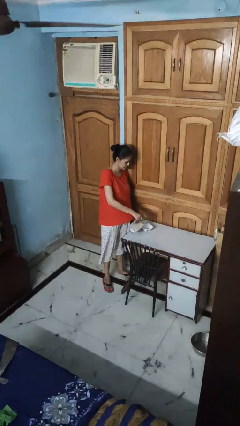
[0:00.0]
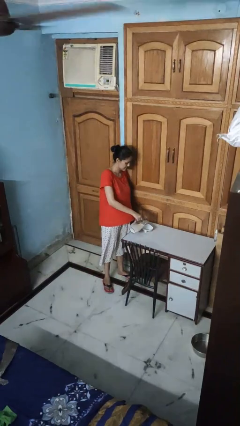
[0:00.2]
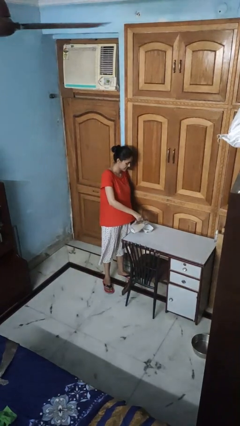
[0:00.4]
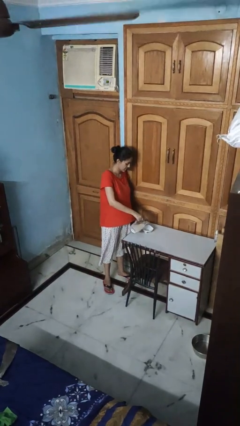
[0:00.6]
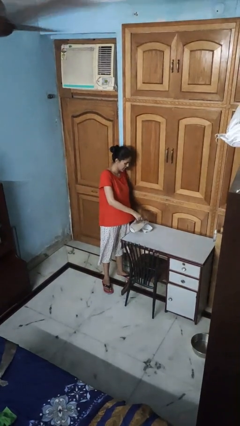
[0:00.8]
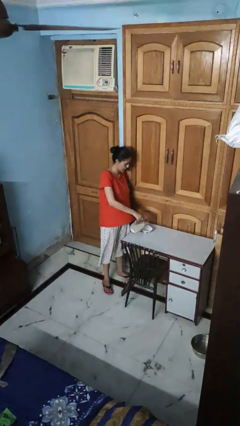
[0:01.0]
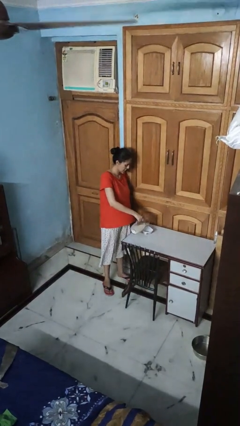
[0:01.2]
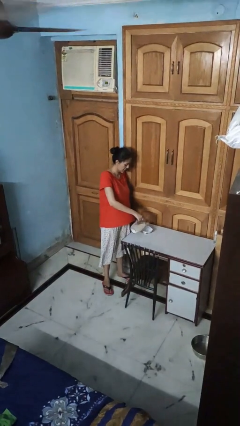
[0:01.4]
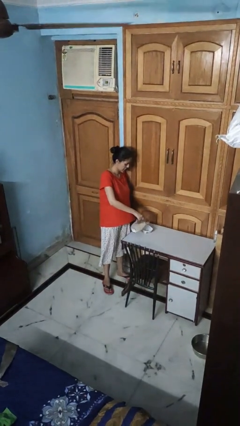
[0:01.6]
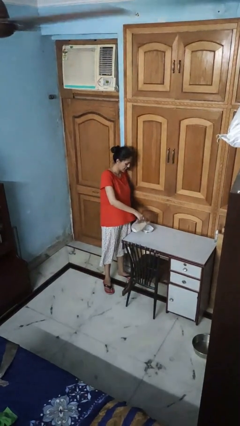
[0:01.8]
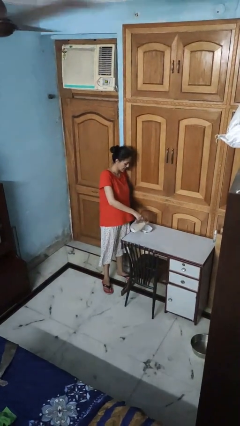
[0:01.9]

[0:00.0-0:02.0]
person pours into bowl

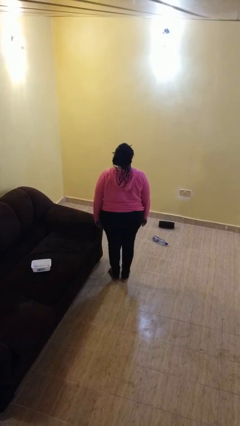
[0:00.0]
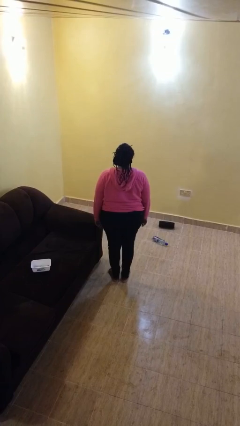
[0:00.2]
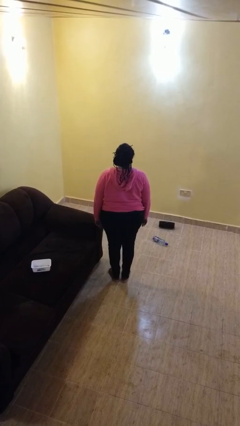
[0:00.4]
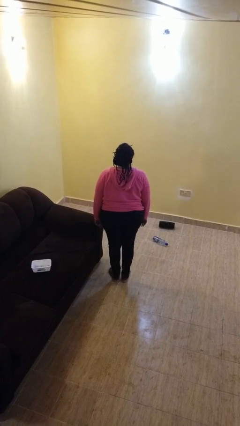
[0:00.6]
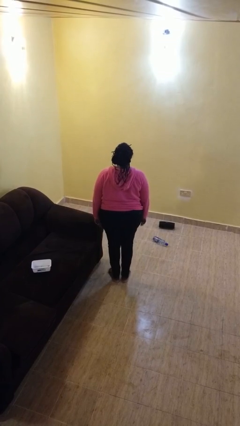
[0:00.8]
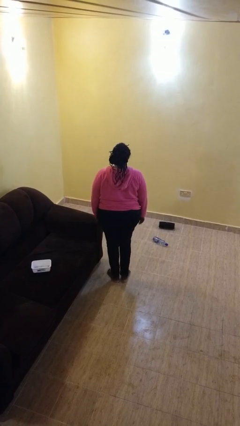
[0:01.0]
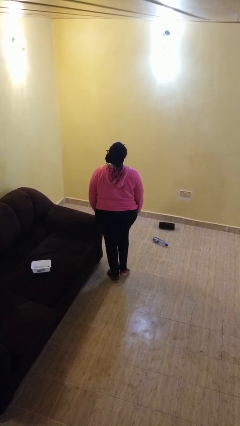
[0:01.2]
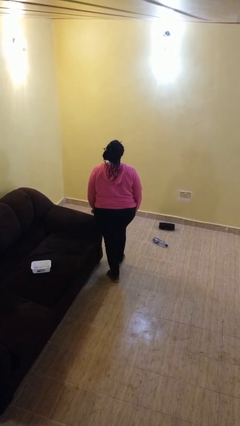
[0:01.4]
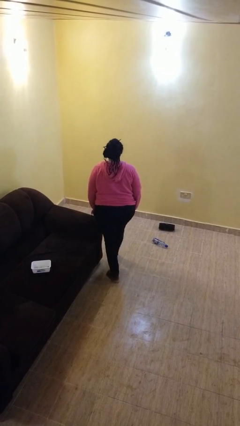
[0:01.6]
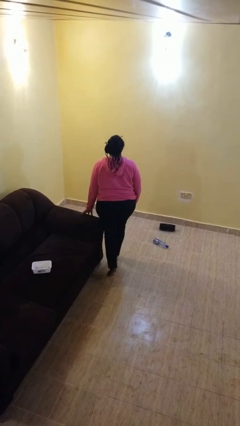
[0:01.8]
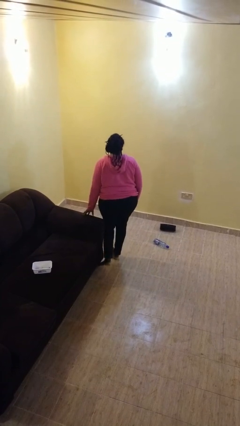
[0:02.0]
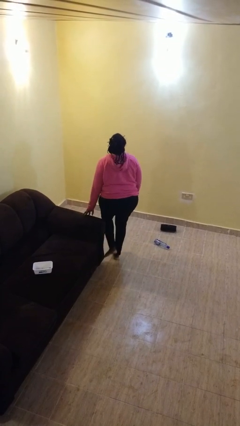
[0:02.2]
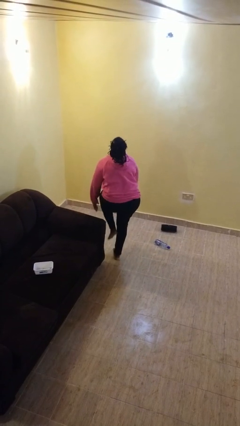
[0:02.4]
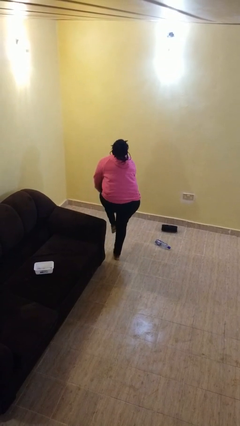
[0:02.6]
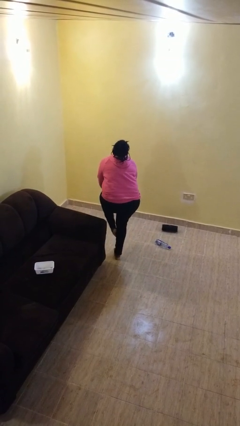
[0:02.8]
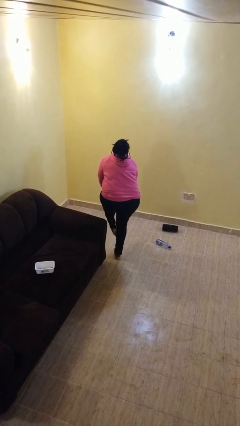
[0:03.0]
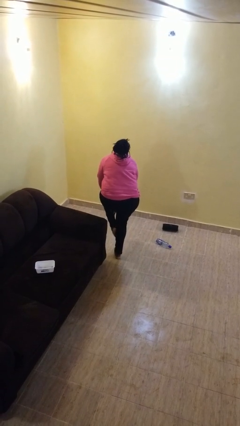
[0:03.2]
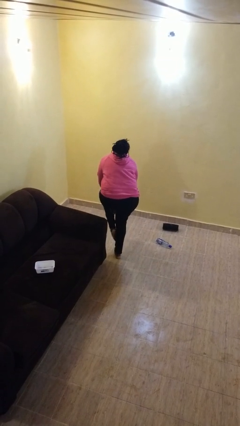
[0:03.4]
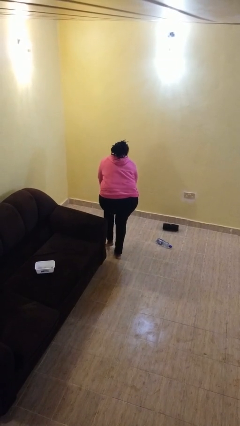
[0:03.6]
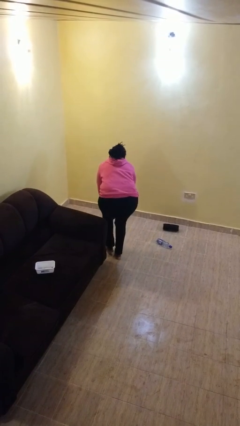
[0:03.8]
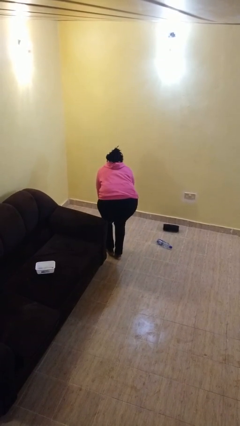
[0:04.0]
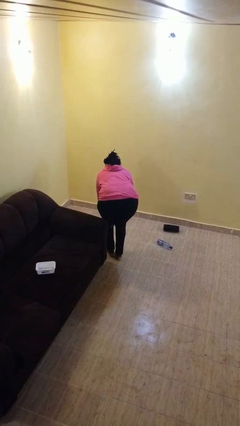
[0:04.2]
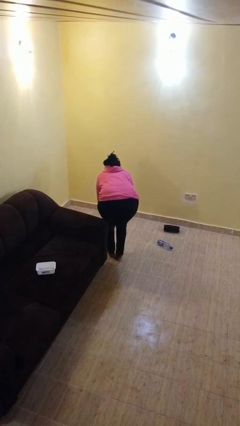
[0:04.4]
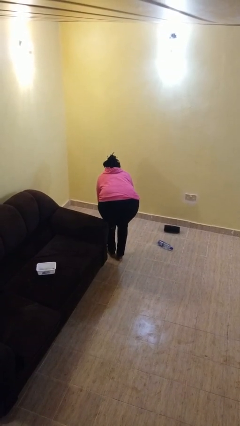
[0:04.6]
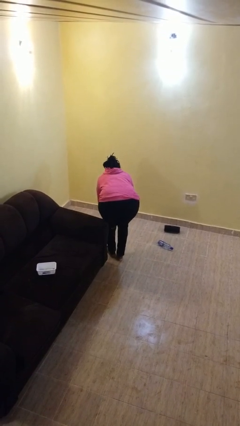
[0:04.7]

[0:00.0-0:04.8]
person stubs toe

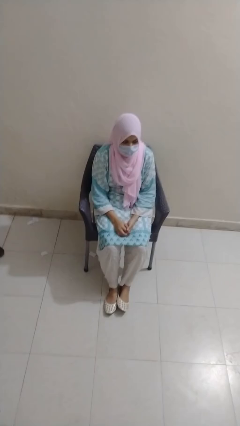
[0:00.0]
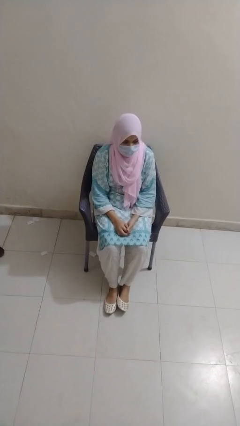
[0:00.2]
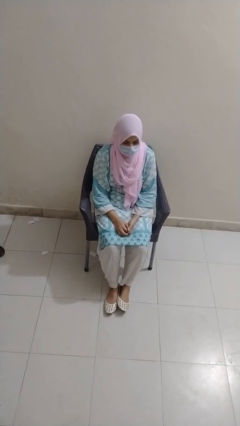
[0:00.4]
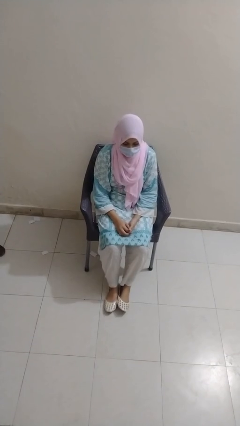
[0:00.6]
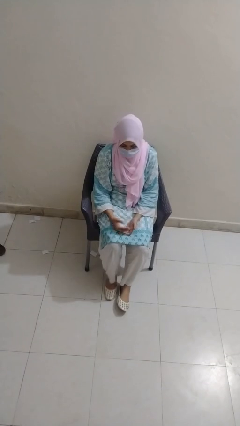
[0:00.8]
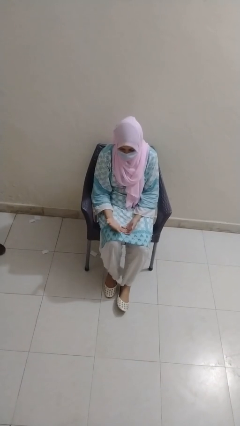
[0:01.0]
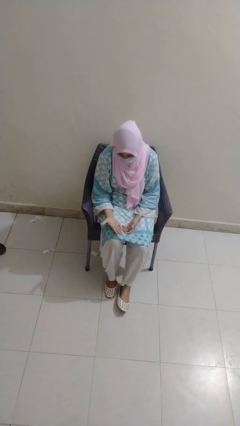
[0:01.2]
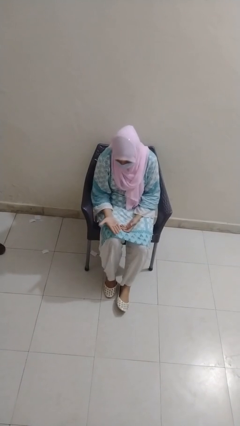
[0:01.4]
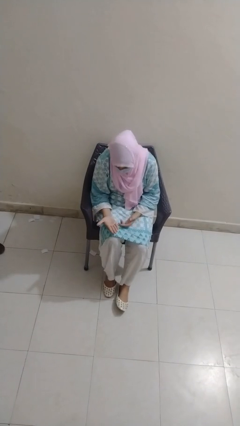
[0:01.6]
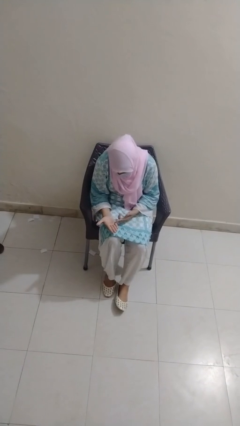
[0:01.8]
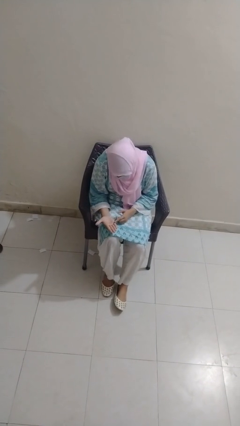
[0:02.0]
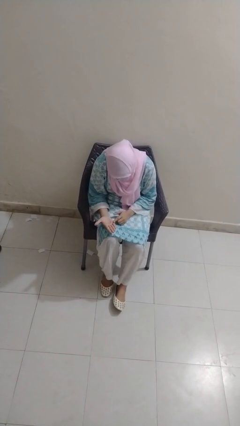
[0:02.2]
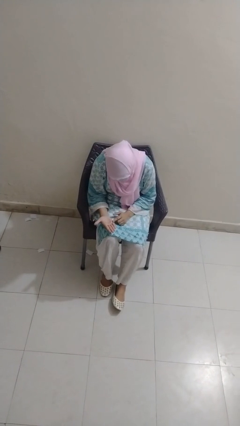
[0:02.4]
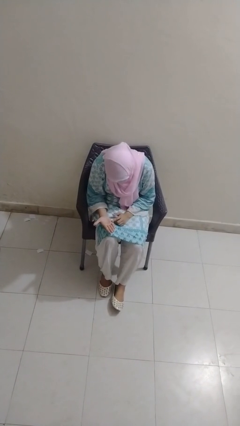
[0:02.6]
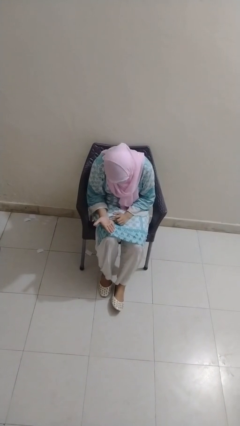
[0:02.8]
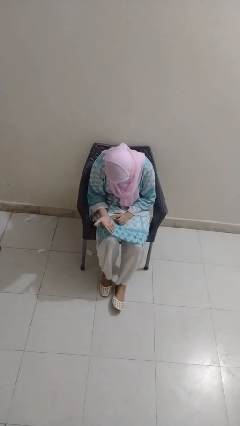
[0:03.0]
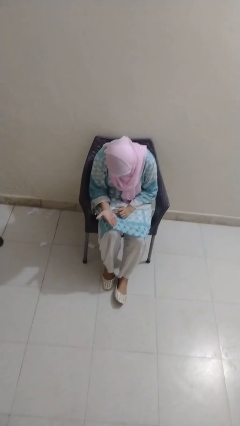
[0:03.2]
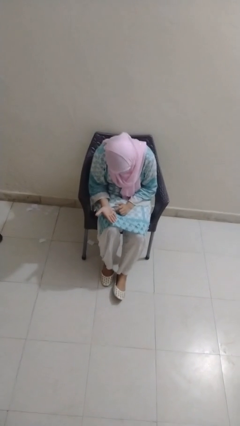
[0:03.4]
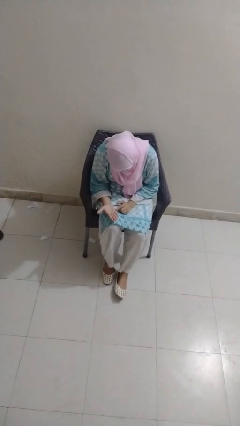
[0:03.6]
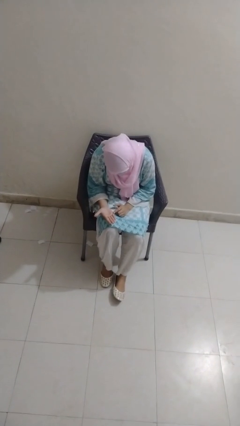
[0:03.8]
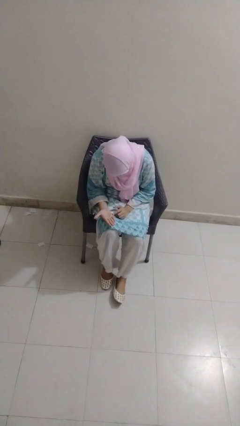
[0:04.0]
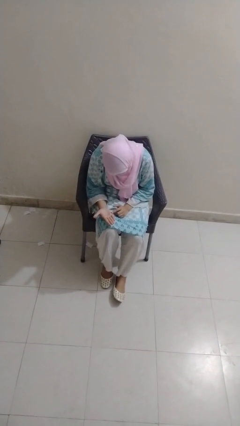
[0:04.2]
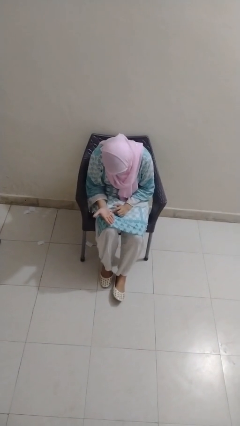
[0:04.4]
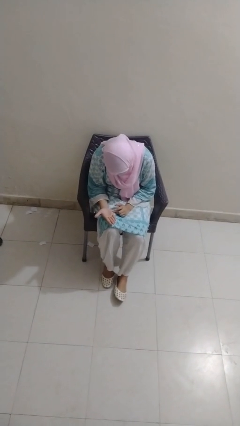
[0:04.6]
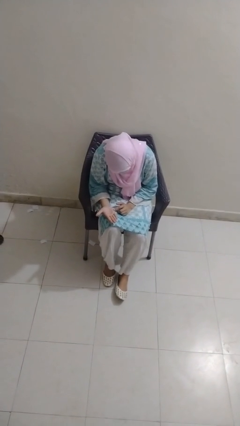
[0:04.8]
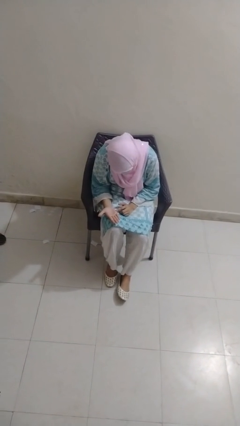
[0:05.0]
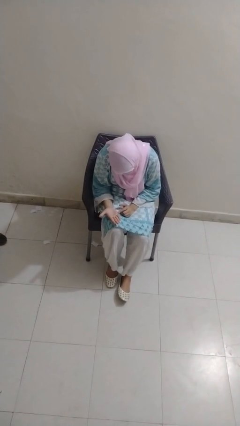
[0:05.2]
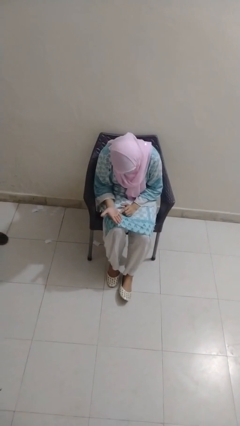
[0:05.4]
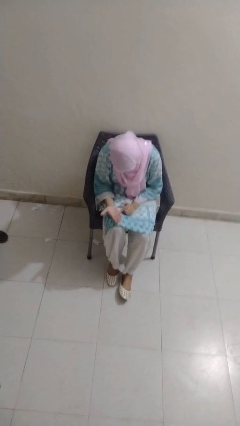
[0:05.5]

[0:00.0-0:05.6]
person looks at hands in lap

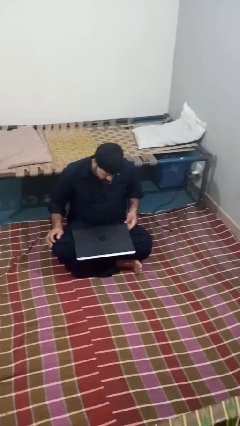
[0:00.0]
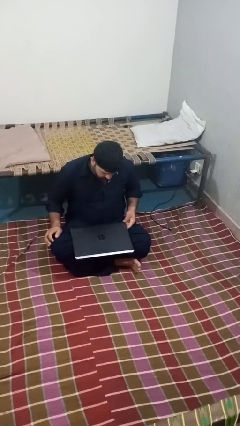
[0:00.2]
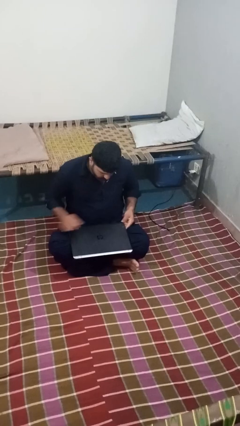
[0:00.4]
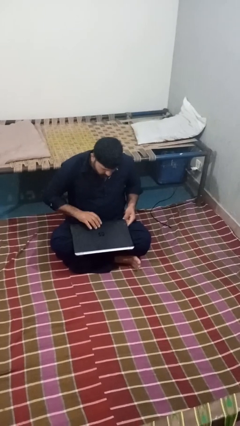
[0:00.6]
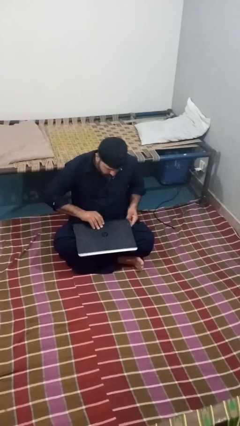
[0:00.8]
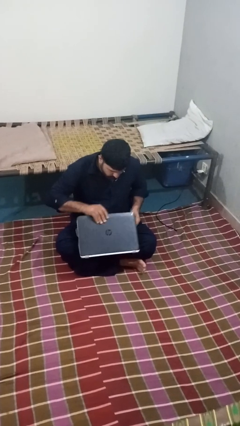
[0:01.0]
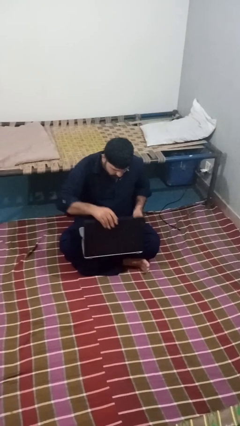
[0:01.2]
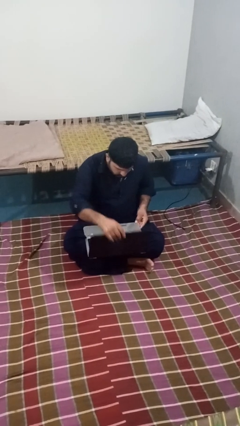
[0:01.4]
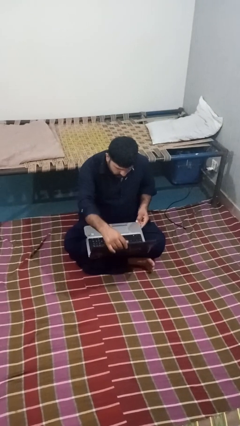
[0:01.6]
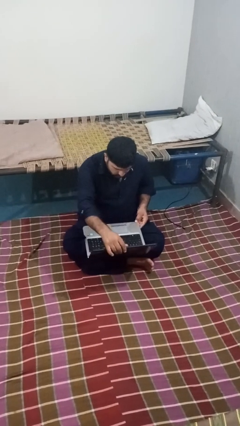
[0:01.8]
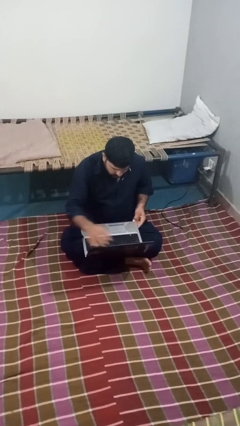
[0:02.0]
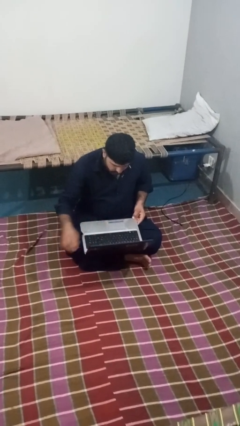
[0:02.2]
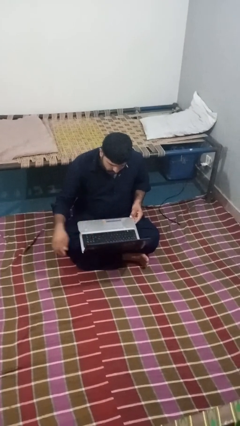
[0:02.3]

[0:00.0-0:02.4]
person opens laptop

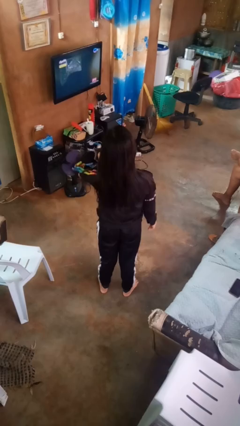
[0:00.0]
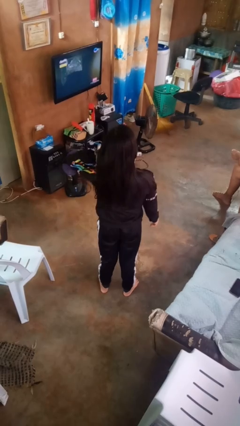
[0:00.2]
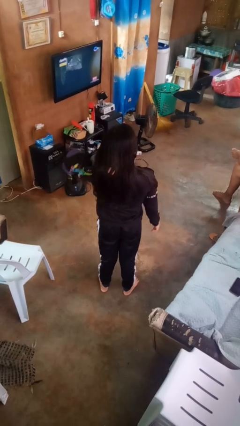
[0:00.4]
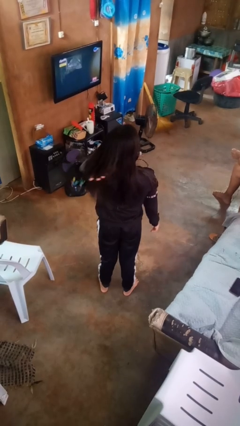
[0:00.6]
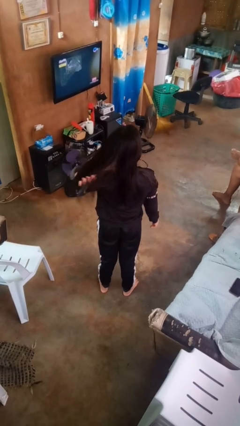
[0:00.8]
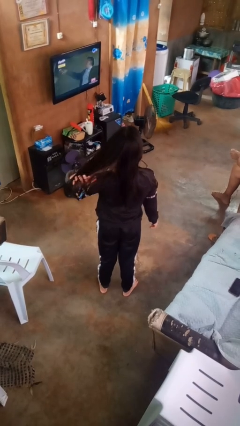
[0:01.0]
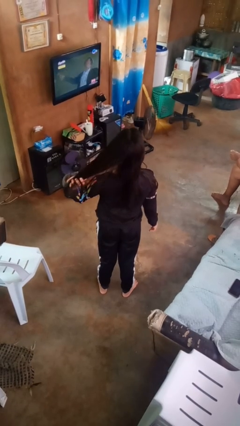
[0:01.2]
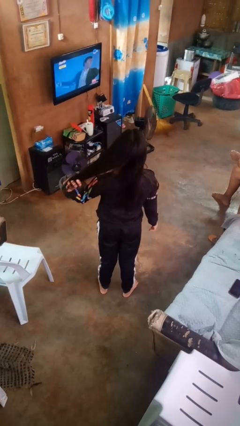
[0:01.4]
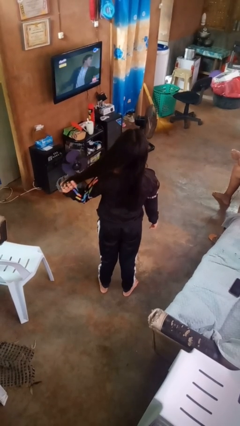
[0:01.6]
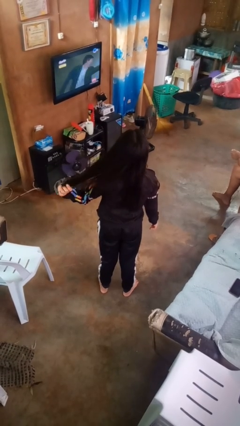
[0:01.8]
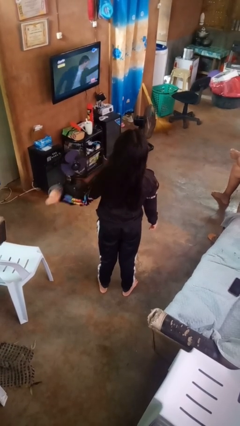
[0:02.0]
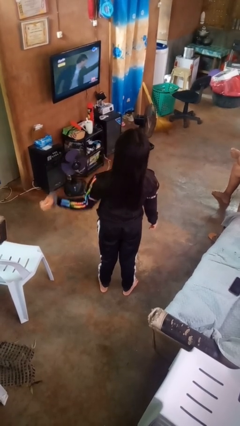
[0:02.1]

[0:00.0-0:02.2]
person strokes hair

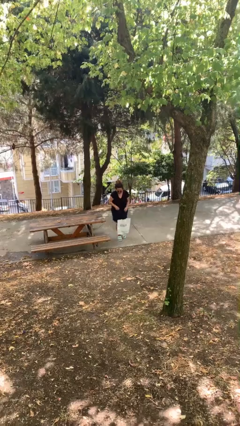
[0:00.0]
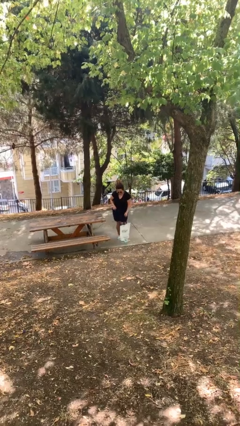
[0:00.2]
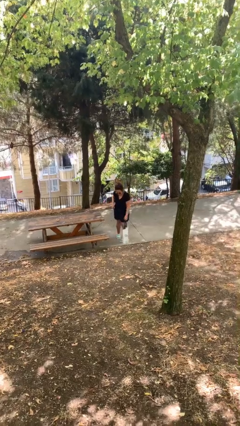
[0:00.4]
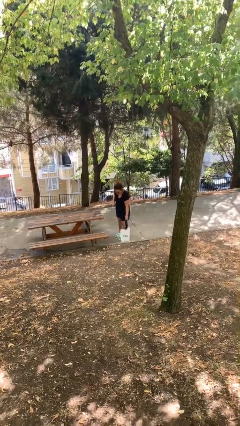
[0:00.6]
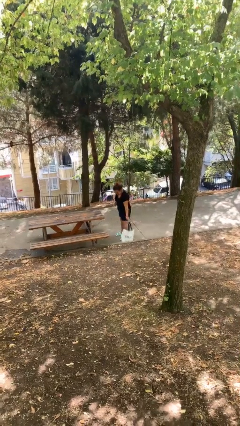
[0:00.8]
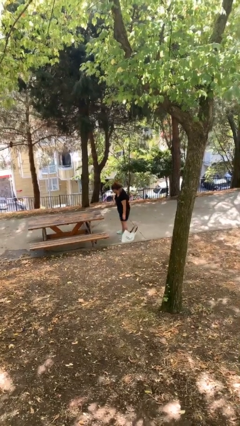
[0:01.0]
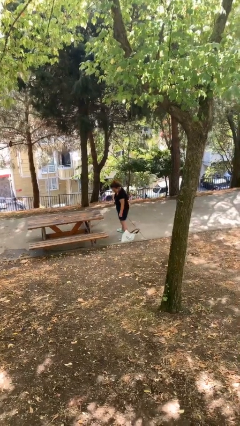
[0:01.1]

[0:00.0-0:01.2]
person puts down object on floor
